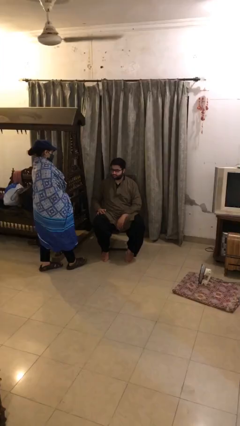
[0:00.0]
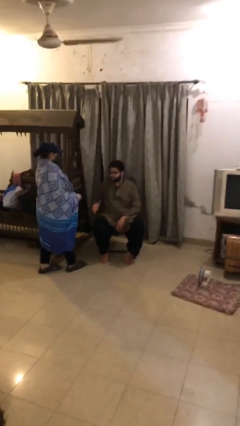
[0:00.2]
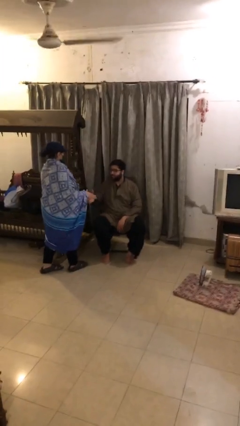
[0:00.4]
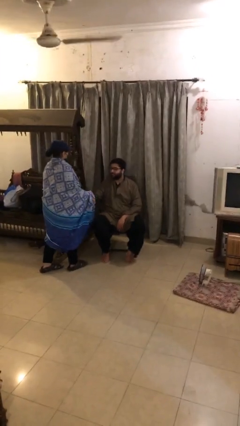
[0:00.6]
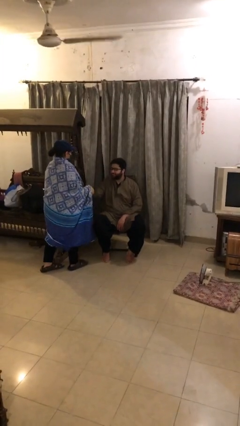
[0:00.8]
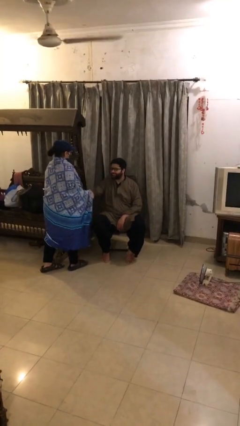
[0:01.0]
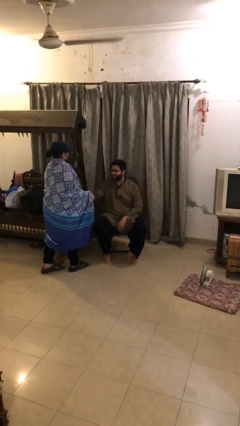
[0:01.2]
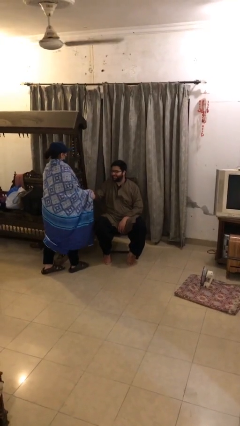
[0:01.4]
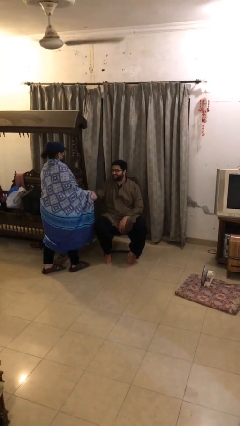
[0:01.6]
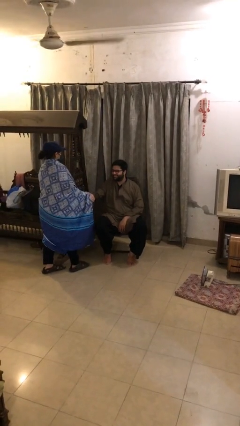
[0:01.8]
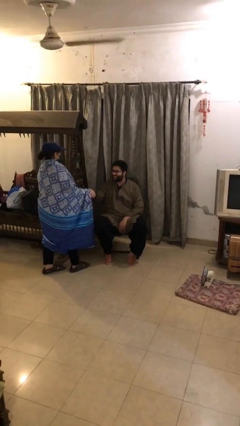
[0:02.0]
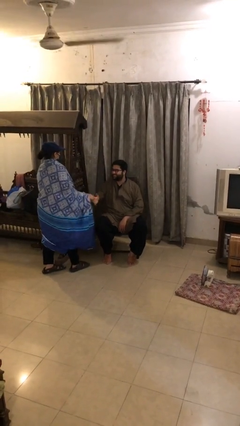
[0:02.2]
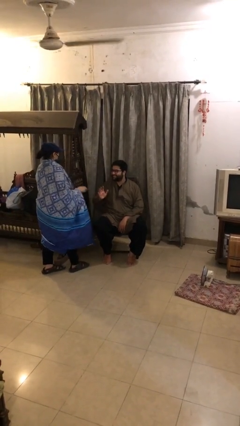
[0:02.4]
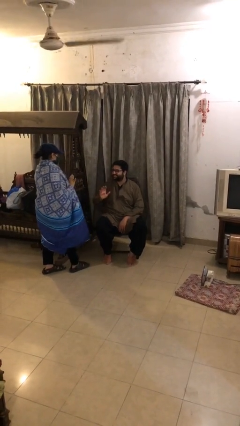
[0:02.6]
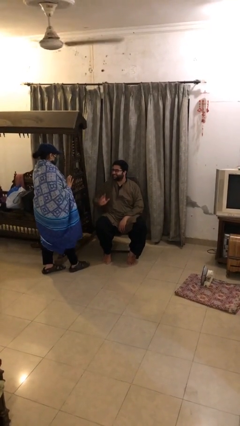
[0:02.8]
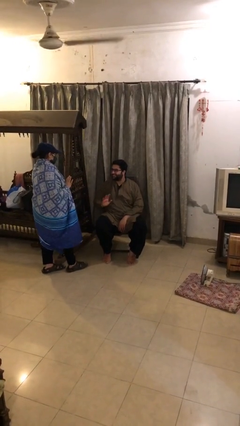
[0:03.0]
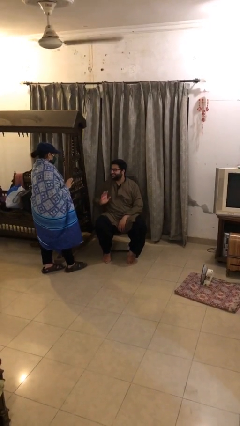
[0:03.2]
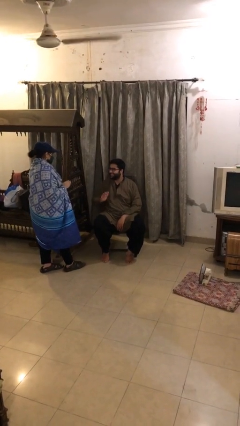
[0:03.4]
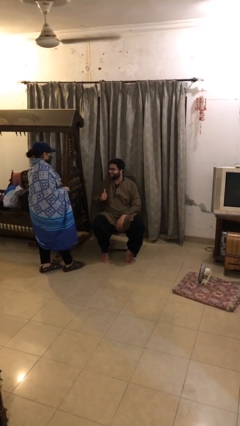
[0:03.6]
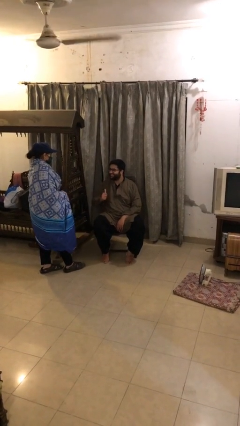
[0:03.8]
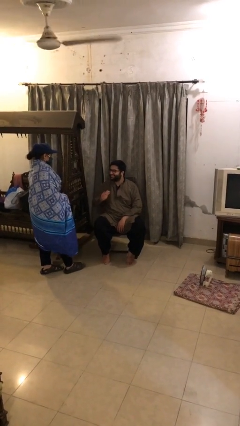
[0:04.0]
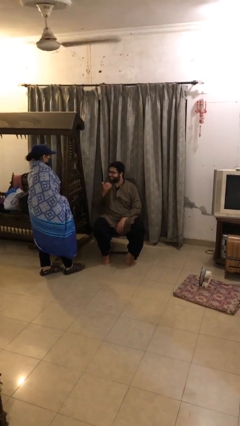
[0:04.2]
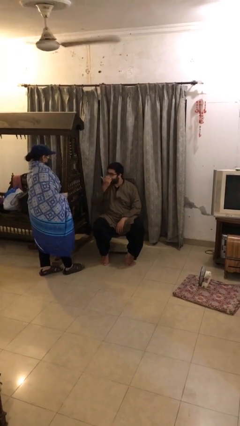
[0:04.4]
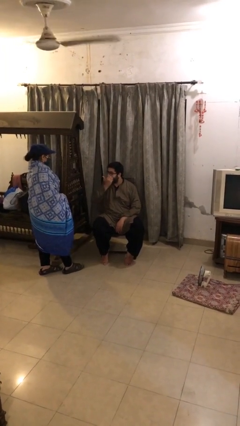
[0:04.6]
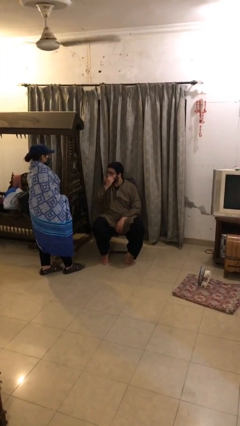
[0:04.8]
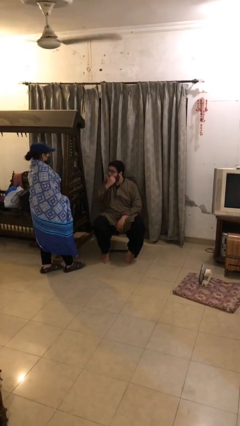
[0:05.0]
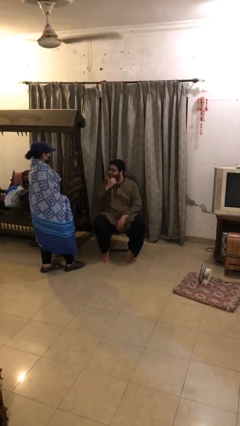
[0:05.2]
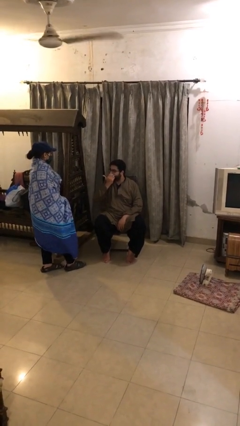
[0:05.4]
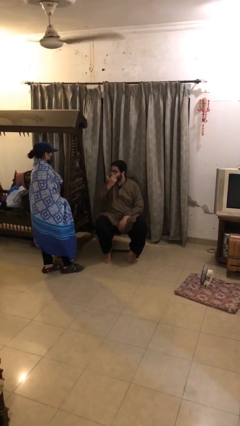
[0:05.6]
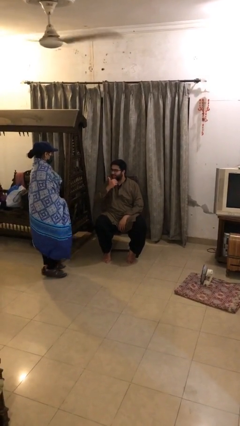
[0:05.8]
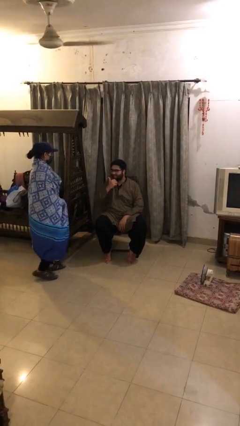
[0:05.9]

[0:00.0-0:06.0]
person shakes hand

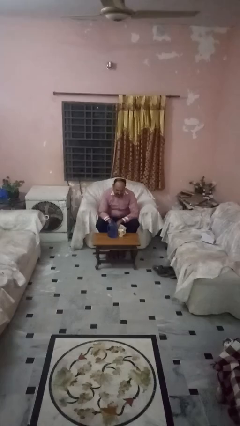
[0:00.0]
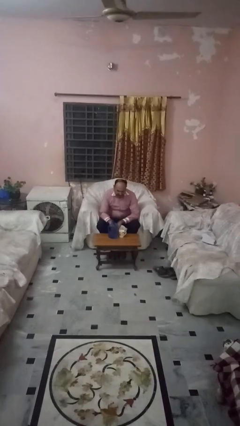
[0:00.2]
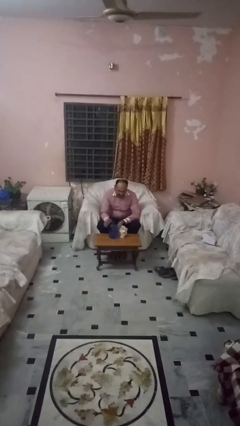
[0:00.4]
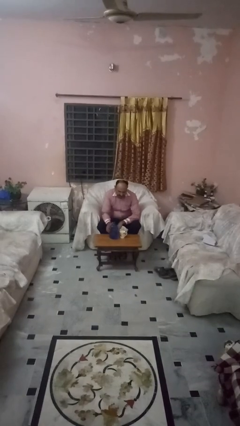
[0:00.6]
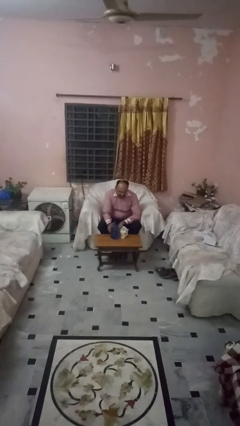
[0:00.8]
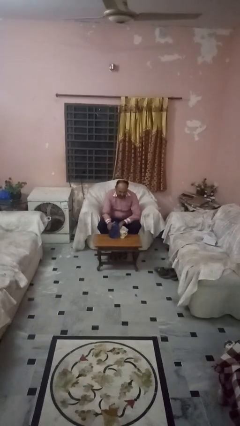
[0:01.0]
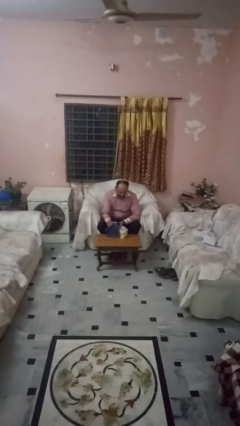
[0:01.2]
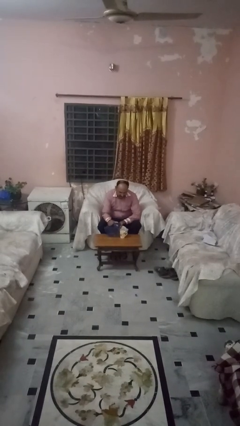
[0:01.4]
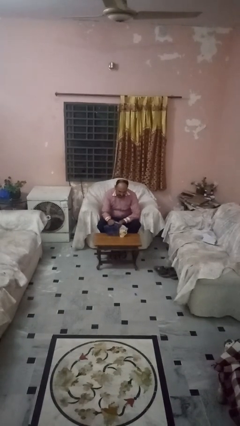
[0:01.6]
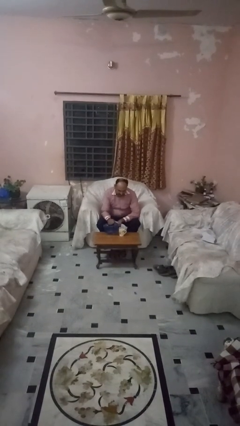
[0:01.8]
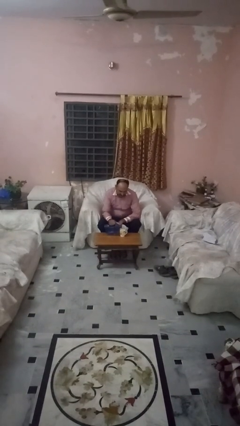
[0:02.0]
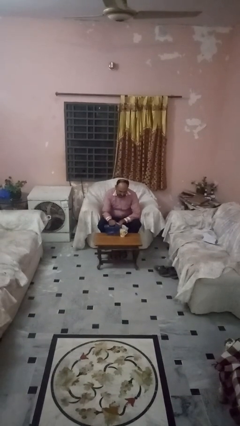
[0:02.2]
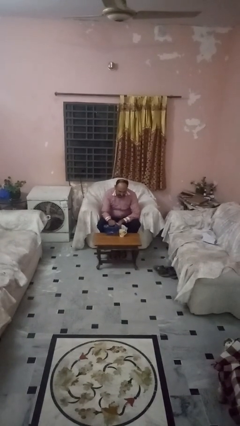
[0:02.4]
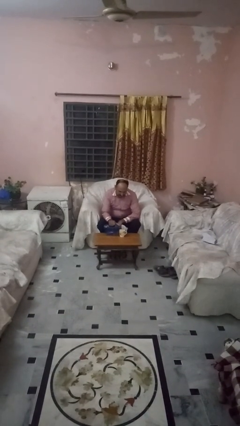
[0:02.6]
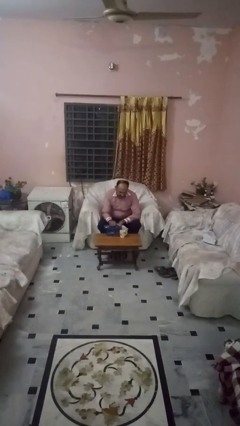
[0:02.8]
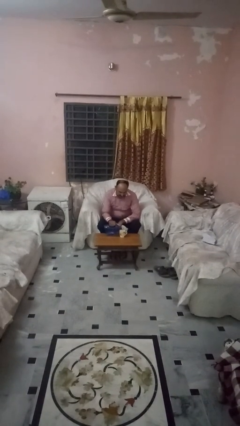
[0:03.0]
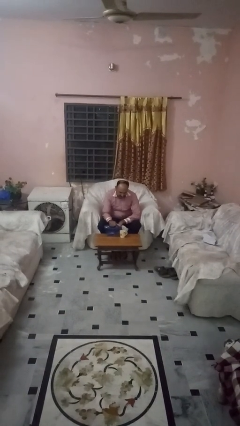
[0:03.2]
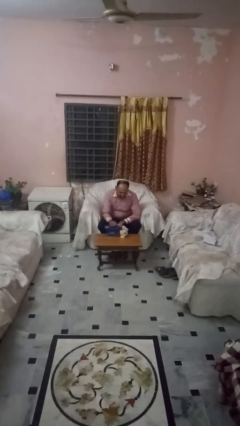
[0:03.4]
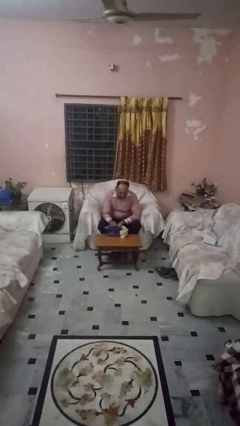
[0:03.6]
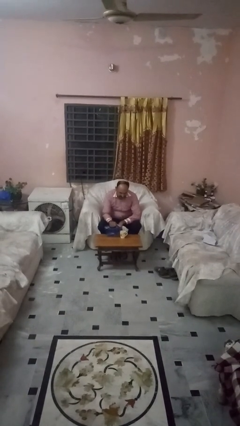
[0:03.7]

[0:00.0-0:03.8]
person pours liquid into cup

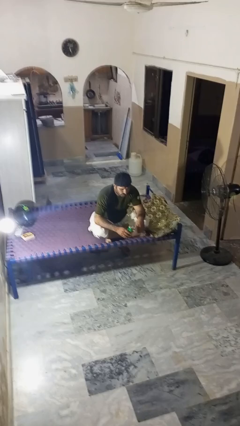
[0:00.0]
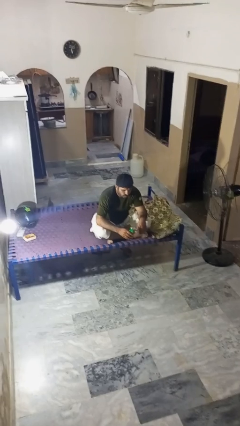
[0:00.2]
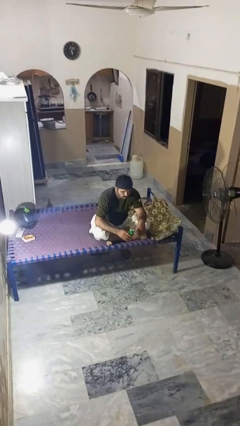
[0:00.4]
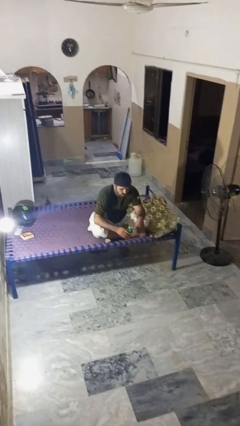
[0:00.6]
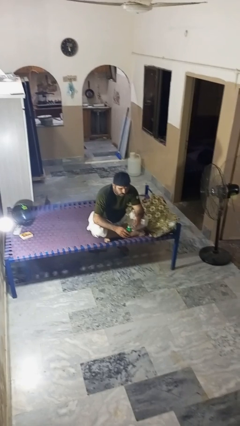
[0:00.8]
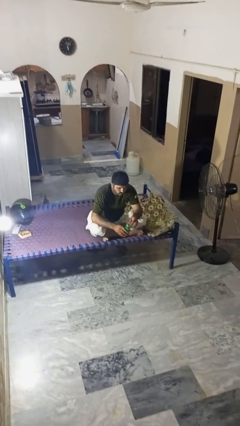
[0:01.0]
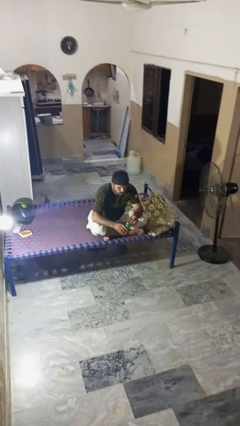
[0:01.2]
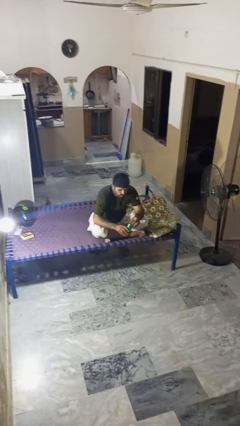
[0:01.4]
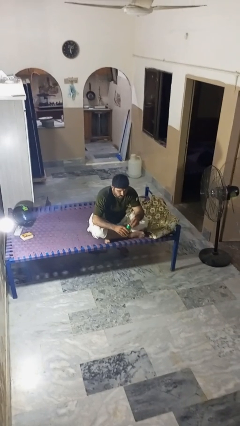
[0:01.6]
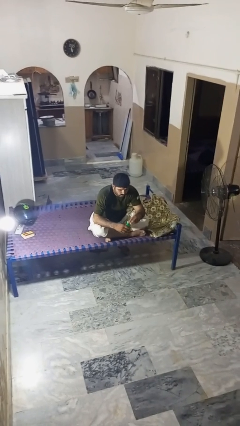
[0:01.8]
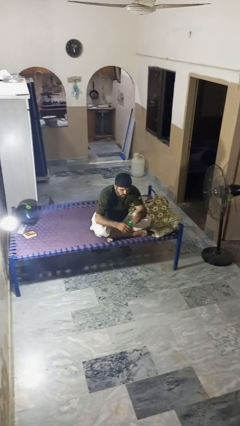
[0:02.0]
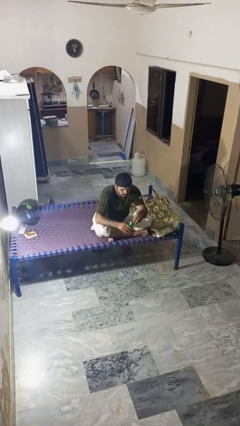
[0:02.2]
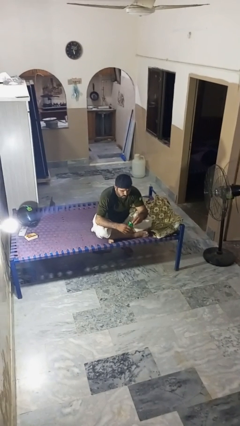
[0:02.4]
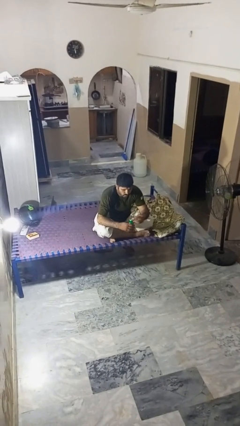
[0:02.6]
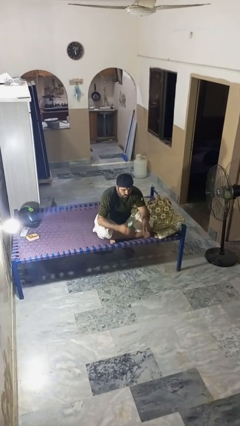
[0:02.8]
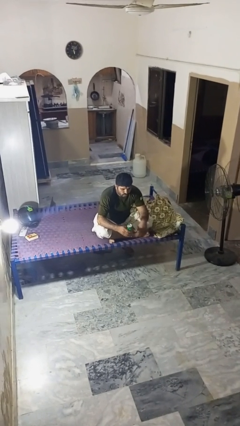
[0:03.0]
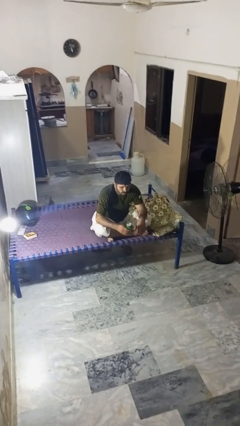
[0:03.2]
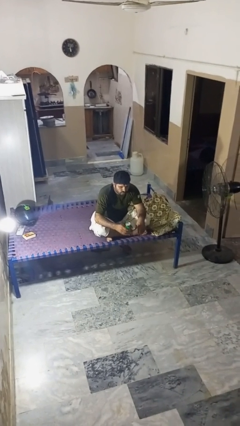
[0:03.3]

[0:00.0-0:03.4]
person opens beverage can

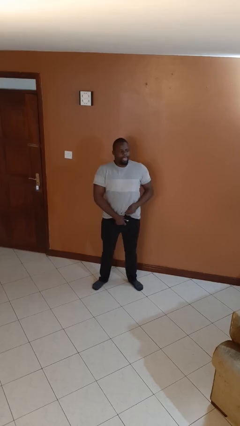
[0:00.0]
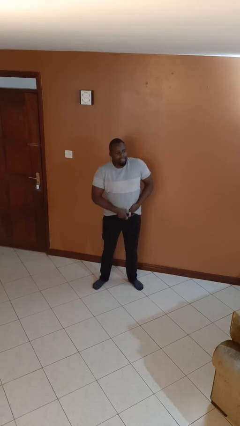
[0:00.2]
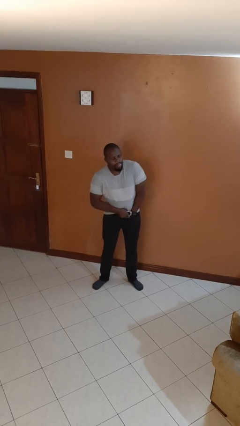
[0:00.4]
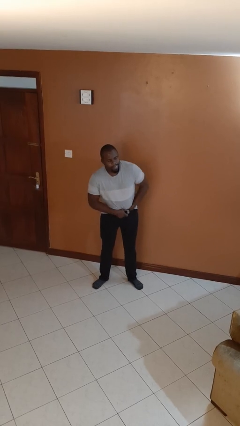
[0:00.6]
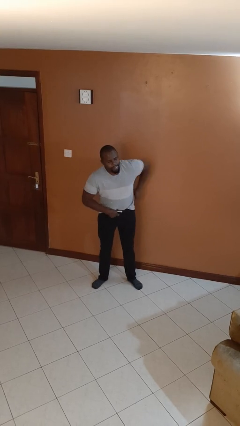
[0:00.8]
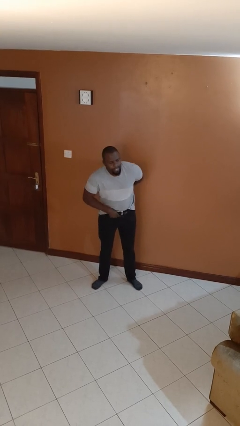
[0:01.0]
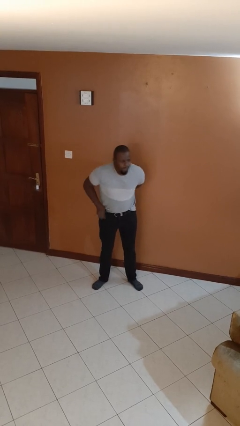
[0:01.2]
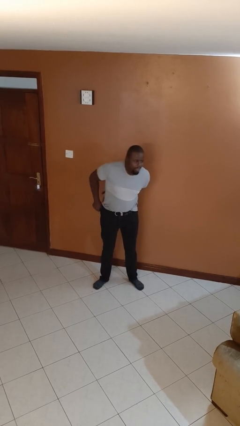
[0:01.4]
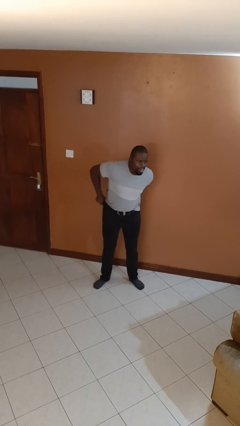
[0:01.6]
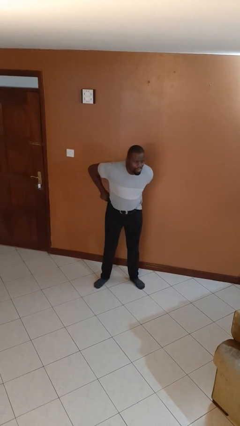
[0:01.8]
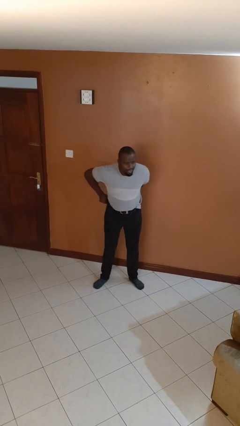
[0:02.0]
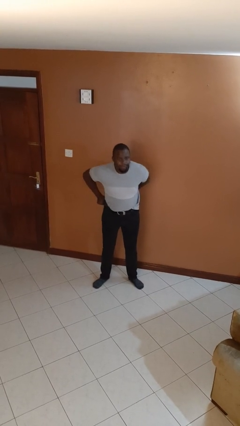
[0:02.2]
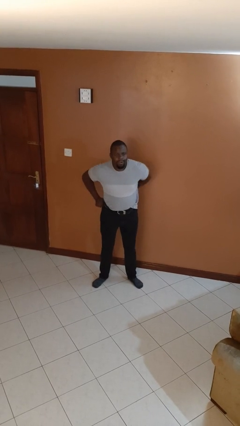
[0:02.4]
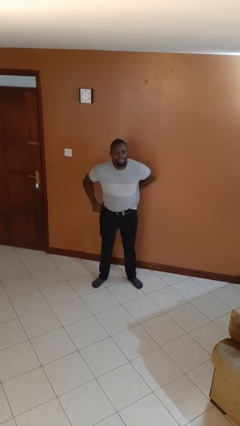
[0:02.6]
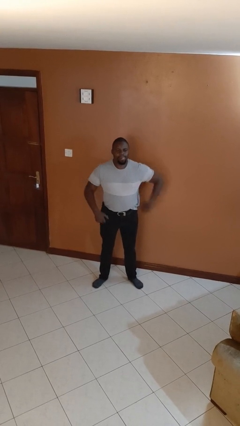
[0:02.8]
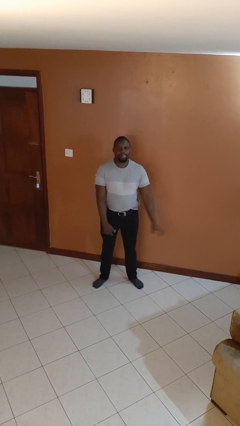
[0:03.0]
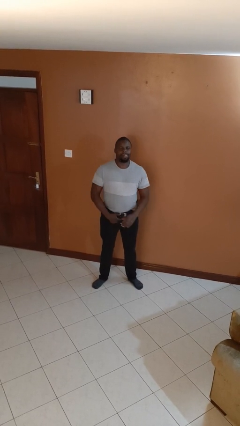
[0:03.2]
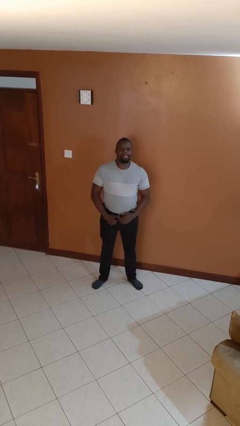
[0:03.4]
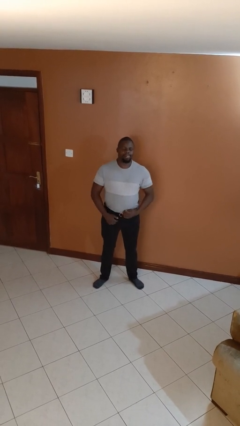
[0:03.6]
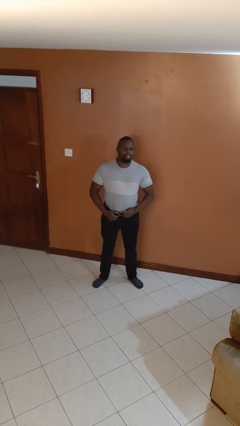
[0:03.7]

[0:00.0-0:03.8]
person tucks in shirt

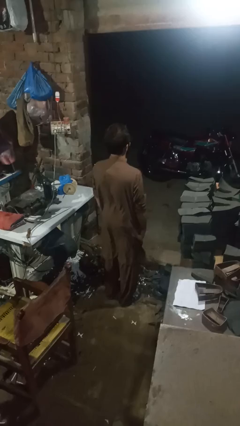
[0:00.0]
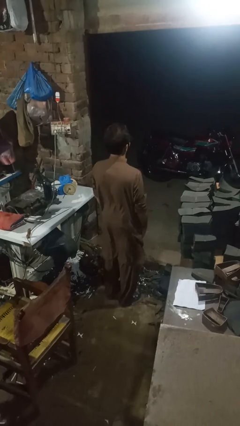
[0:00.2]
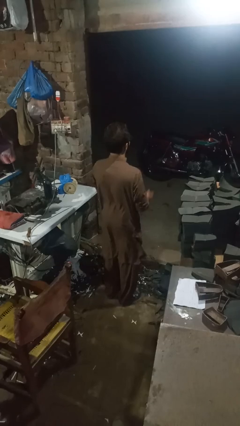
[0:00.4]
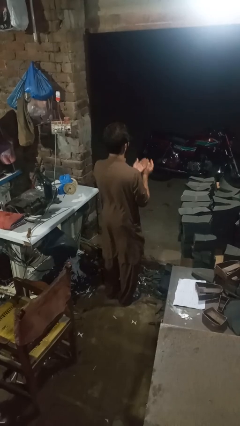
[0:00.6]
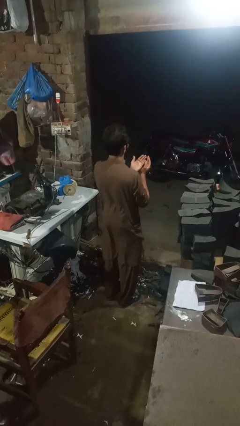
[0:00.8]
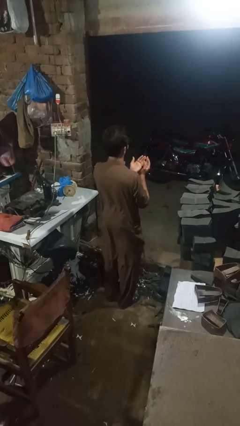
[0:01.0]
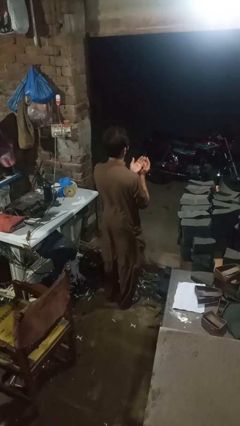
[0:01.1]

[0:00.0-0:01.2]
person prays
